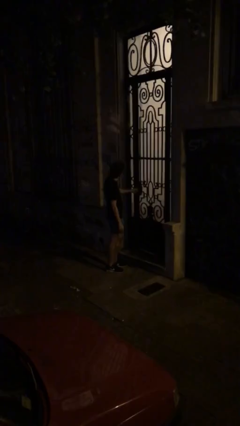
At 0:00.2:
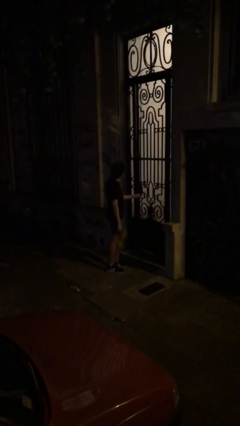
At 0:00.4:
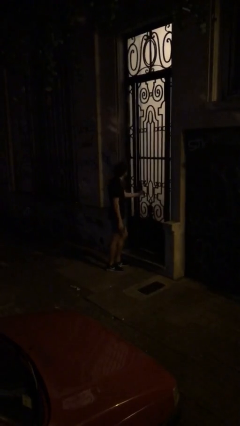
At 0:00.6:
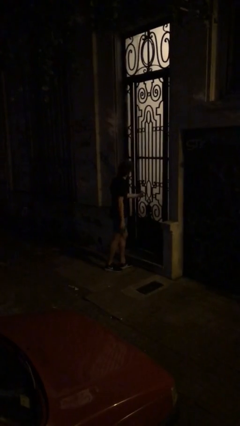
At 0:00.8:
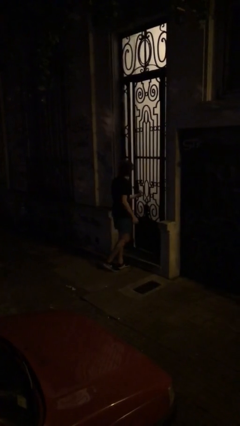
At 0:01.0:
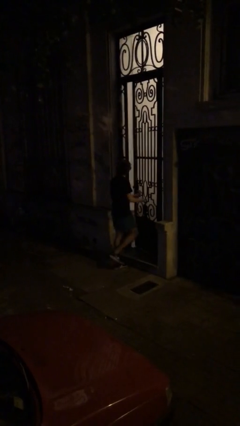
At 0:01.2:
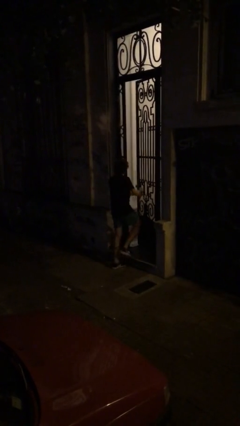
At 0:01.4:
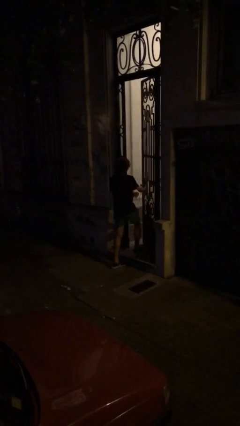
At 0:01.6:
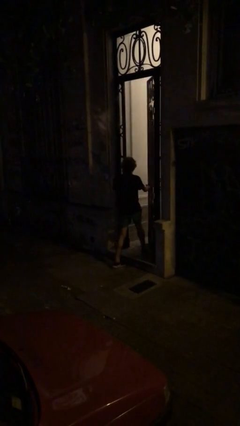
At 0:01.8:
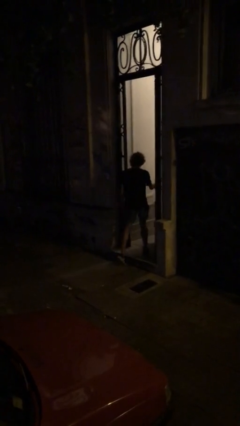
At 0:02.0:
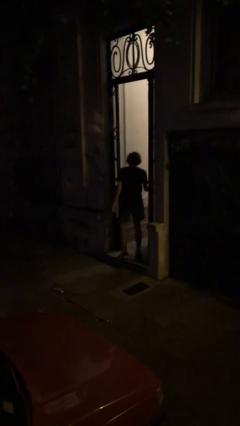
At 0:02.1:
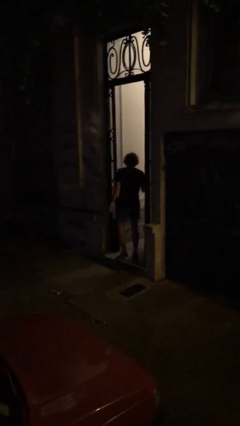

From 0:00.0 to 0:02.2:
person opens facility door

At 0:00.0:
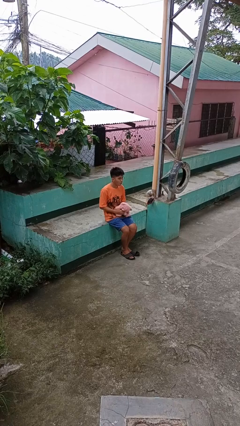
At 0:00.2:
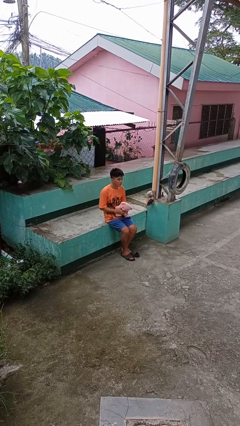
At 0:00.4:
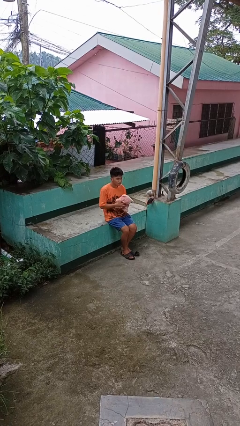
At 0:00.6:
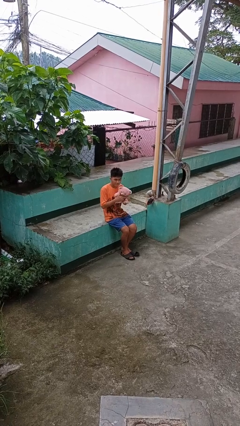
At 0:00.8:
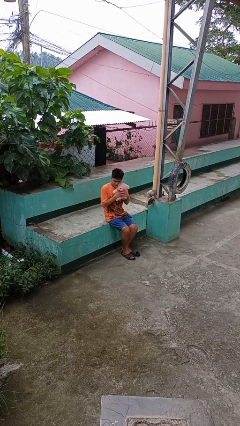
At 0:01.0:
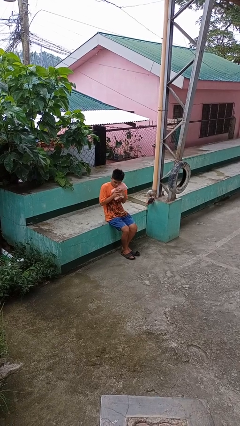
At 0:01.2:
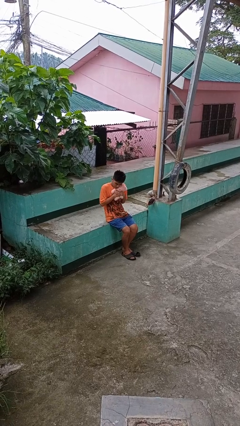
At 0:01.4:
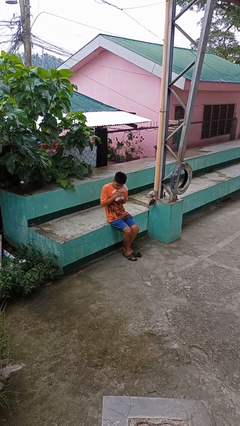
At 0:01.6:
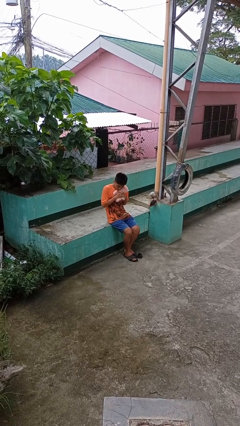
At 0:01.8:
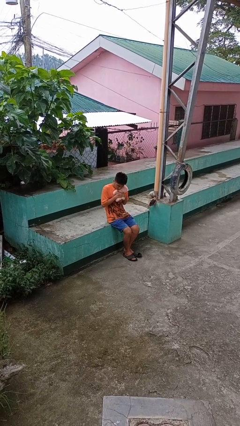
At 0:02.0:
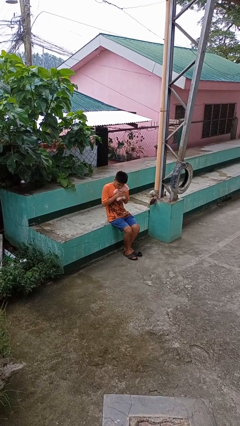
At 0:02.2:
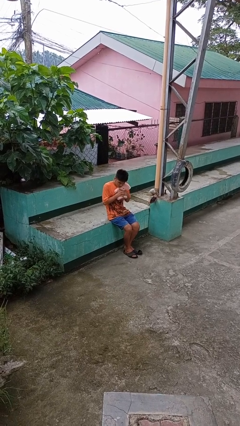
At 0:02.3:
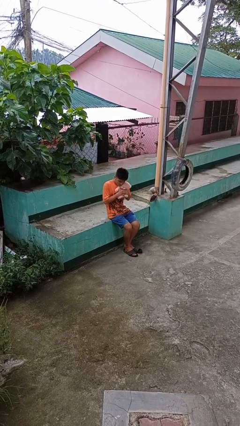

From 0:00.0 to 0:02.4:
person hugs stuffed animal

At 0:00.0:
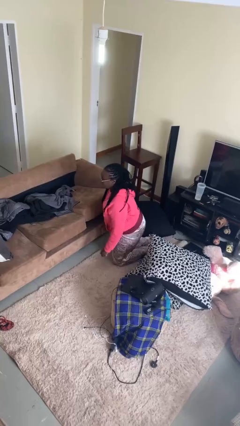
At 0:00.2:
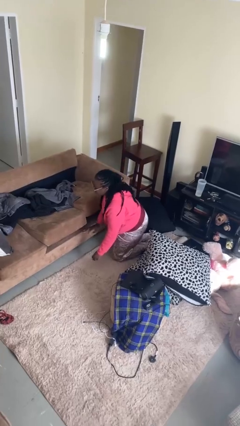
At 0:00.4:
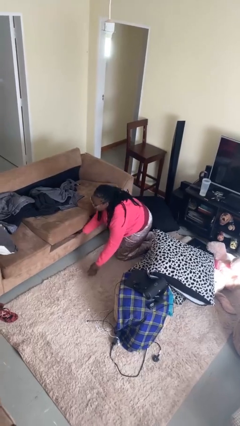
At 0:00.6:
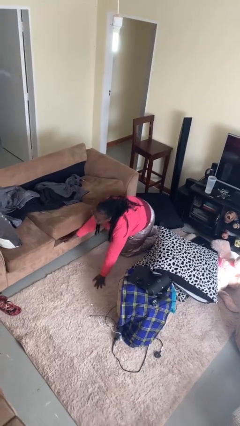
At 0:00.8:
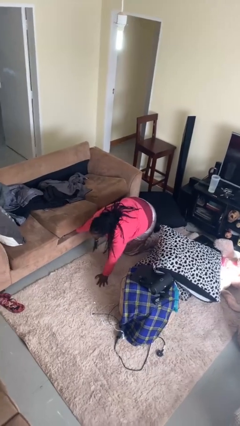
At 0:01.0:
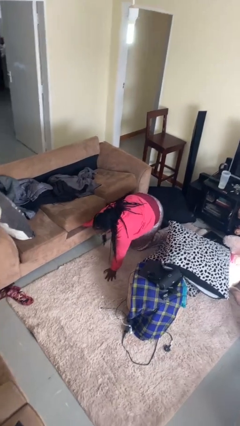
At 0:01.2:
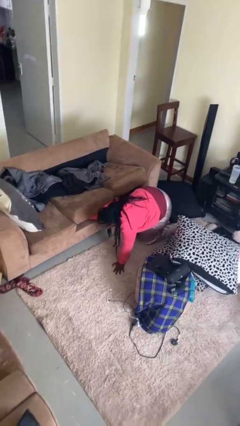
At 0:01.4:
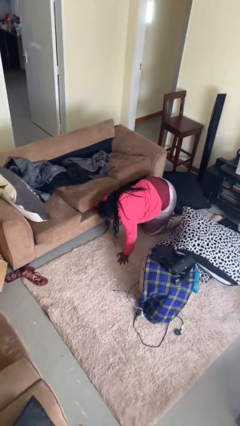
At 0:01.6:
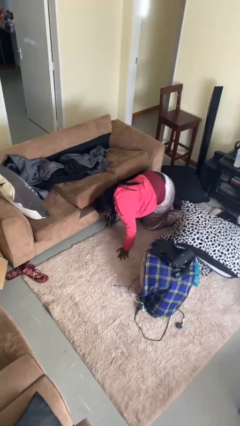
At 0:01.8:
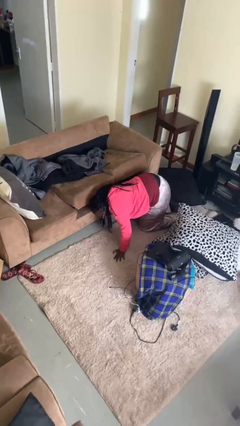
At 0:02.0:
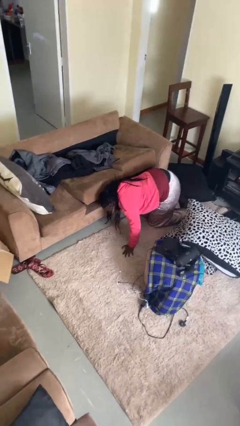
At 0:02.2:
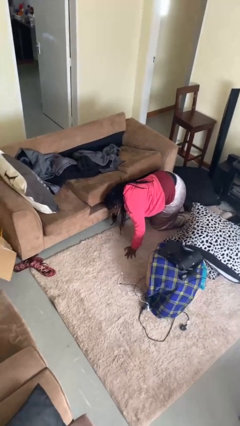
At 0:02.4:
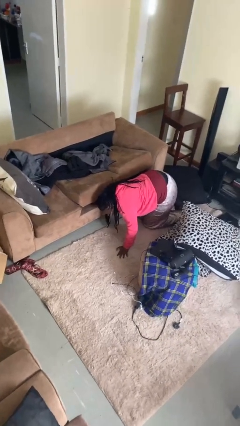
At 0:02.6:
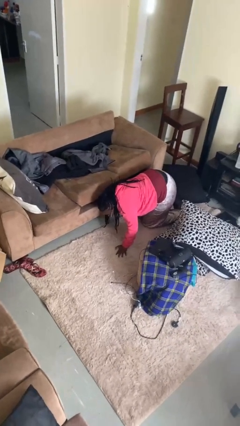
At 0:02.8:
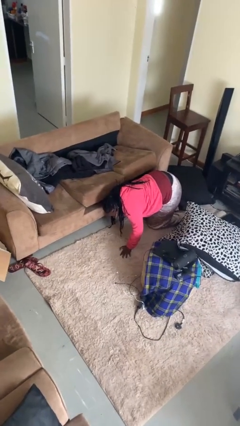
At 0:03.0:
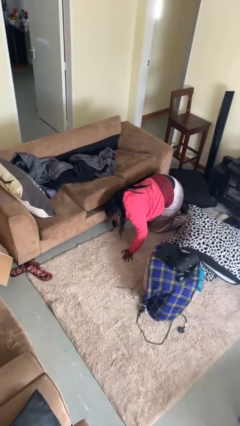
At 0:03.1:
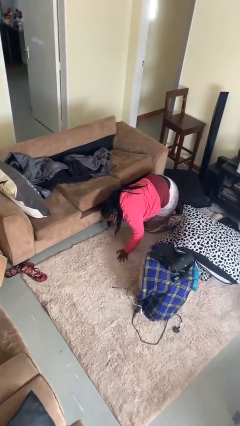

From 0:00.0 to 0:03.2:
person searches under couch

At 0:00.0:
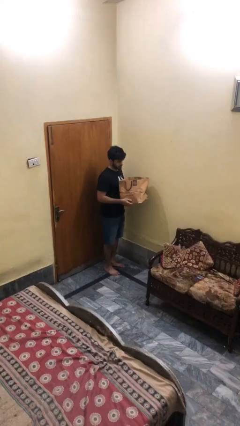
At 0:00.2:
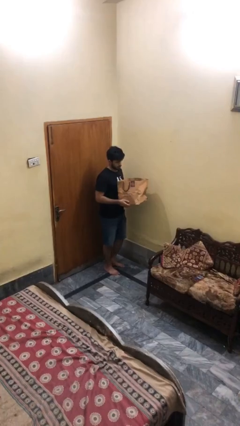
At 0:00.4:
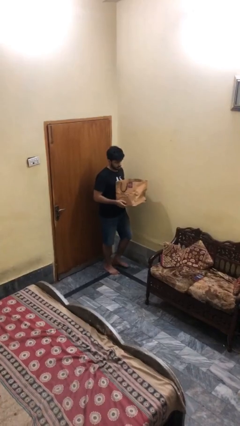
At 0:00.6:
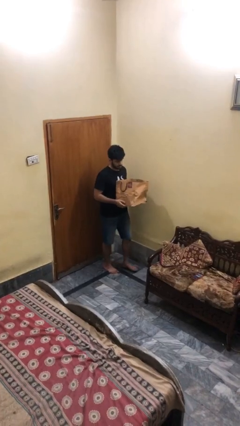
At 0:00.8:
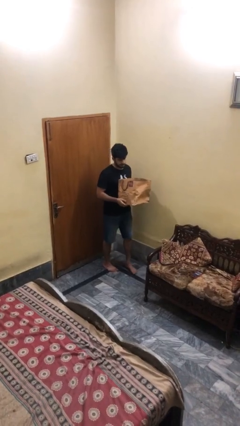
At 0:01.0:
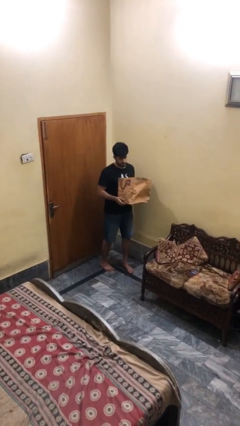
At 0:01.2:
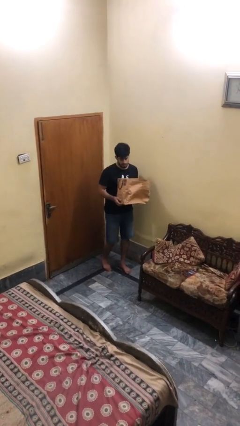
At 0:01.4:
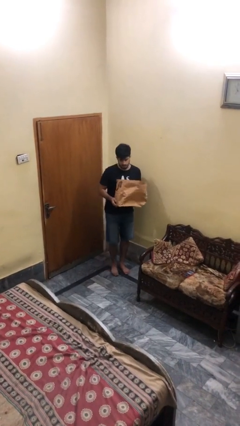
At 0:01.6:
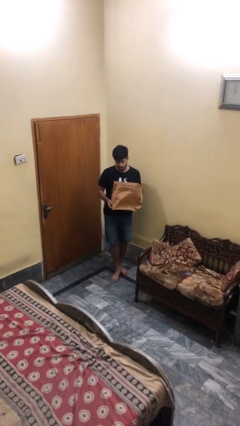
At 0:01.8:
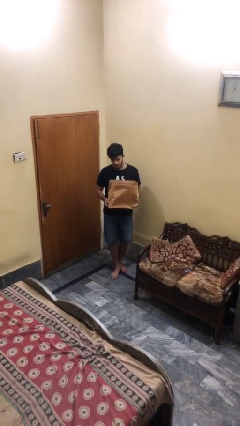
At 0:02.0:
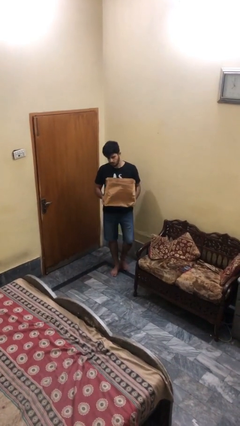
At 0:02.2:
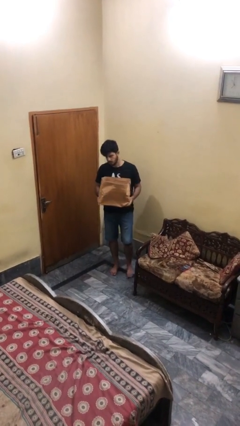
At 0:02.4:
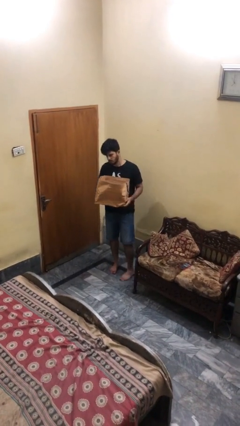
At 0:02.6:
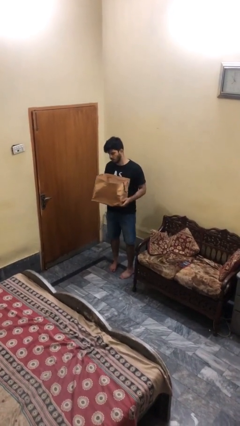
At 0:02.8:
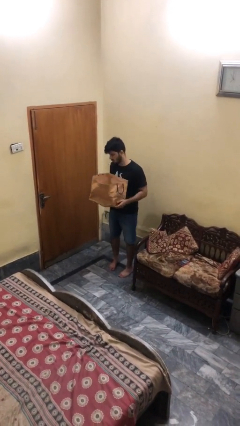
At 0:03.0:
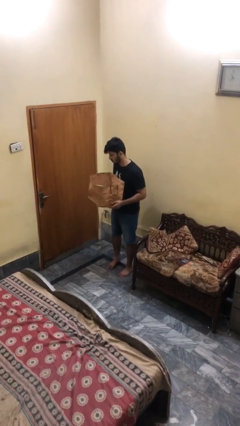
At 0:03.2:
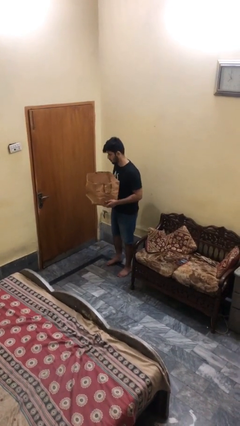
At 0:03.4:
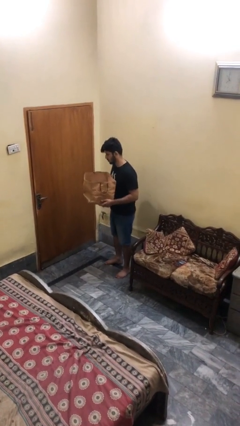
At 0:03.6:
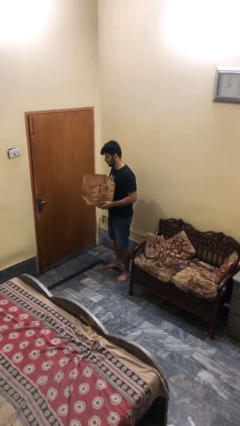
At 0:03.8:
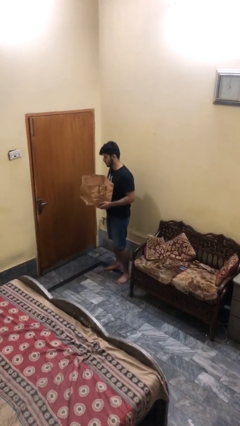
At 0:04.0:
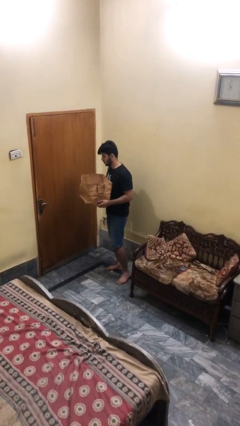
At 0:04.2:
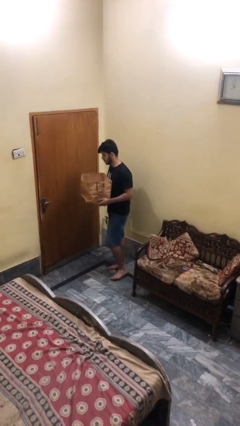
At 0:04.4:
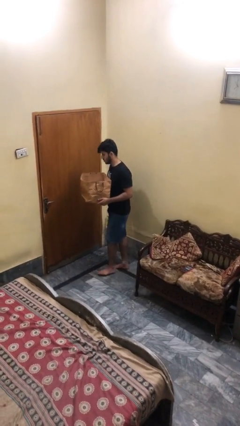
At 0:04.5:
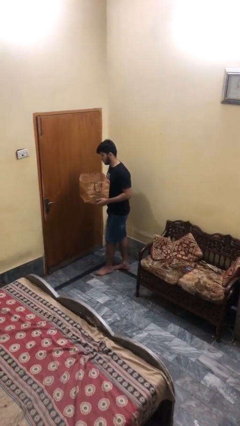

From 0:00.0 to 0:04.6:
person carries groceries

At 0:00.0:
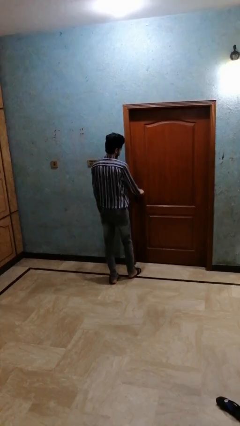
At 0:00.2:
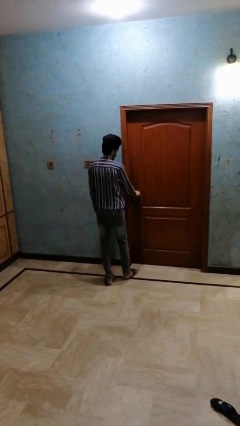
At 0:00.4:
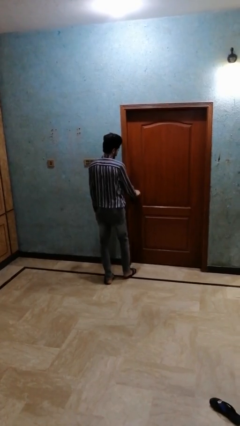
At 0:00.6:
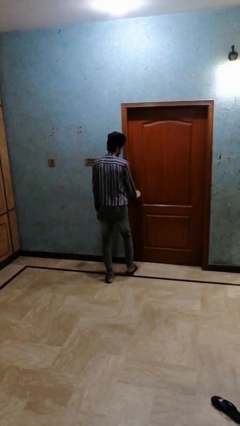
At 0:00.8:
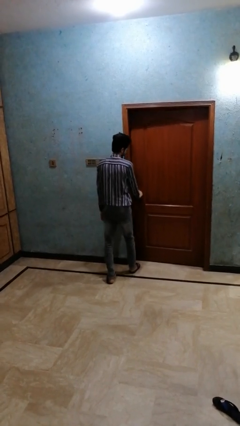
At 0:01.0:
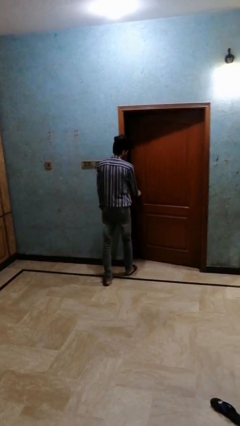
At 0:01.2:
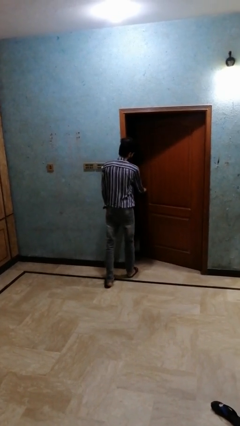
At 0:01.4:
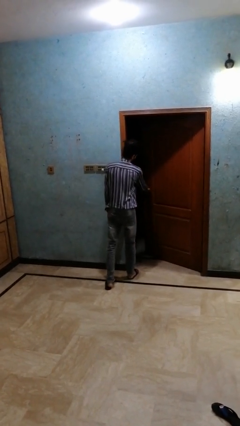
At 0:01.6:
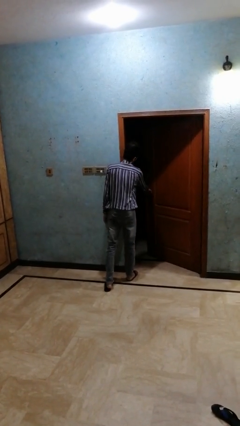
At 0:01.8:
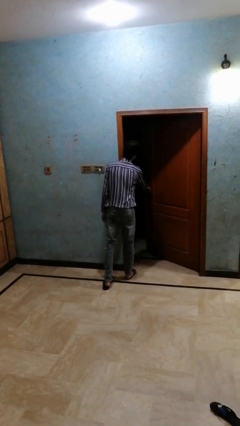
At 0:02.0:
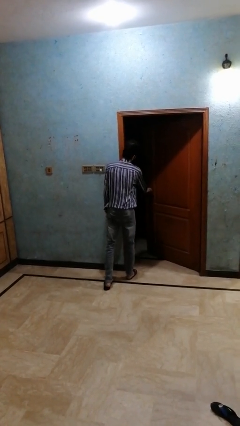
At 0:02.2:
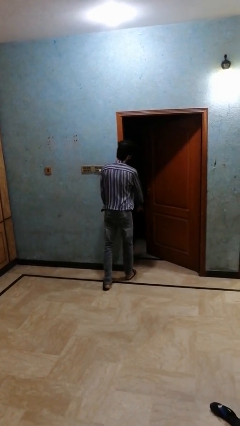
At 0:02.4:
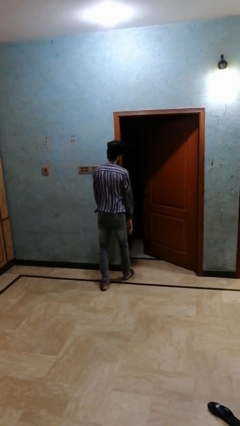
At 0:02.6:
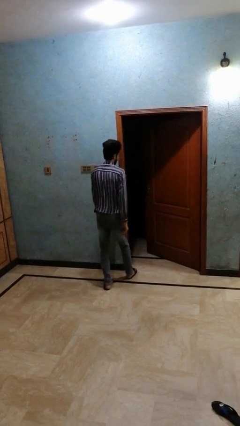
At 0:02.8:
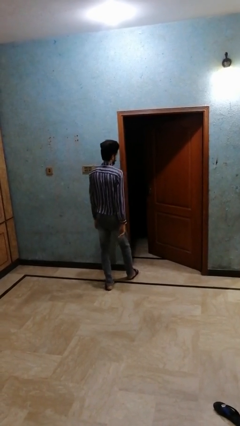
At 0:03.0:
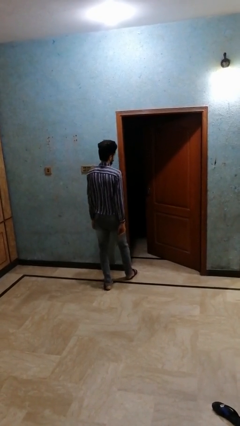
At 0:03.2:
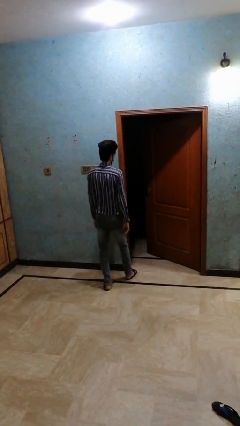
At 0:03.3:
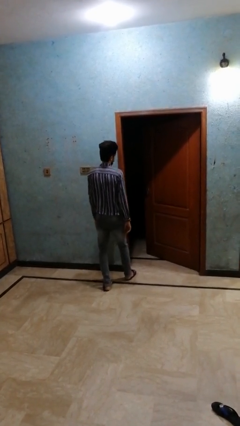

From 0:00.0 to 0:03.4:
person opens closet door

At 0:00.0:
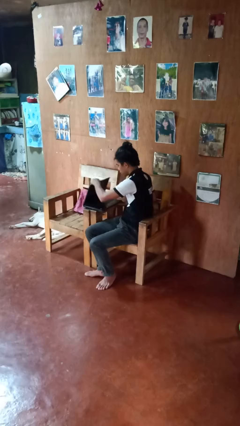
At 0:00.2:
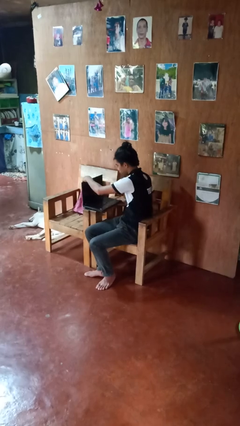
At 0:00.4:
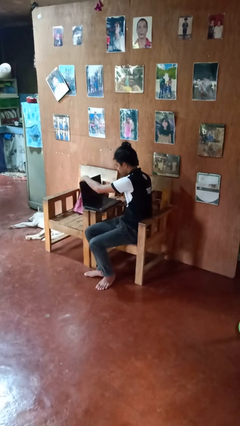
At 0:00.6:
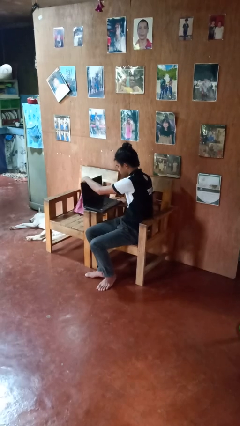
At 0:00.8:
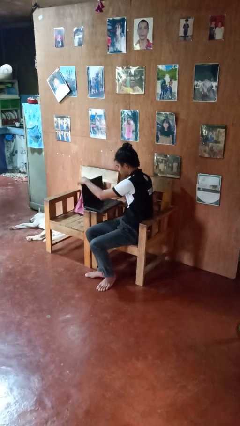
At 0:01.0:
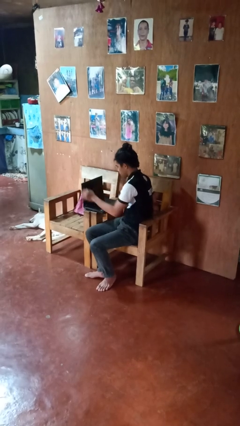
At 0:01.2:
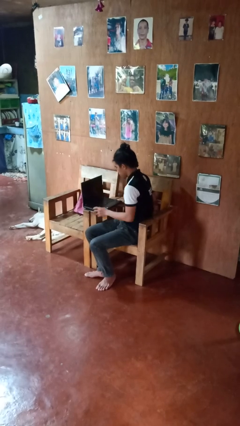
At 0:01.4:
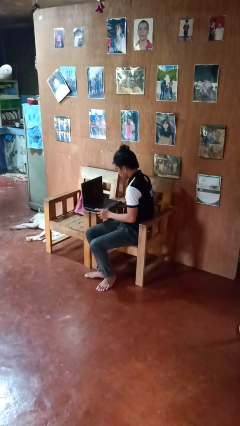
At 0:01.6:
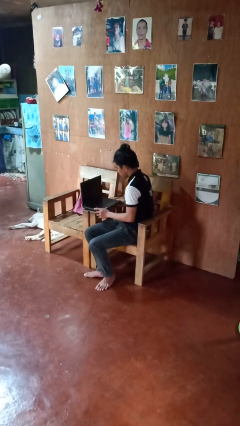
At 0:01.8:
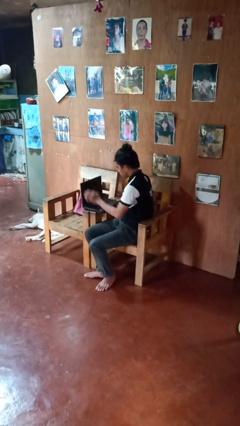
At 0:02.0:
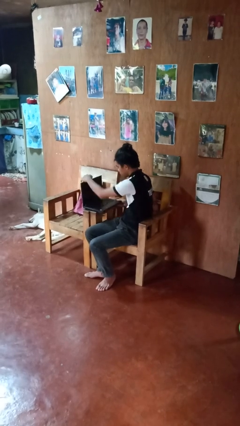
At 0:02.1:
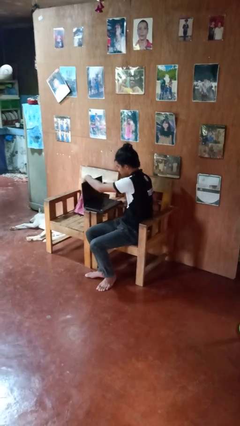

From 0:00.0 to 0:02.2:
person opens laptop
